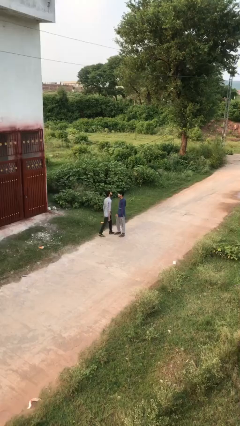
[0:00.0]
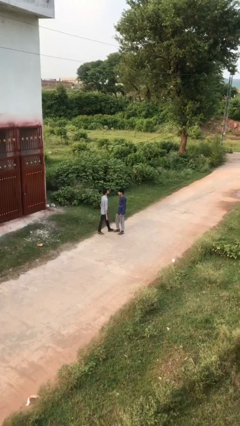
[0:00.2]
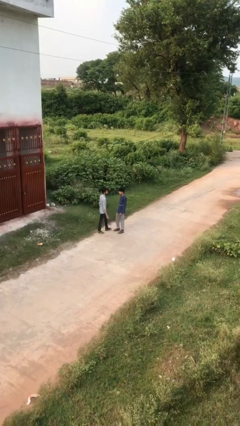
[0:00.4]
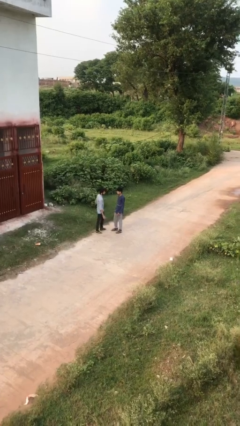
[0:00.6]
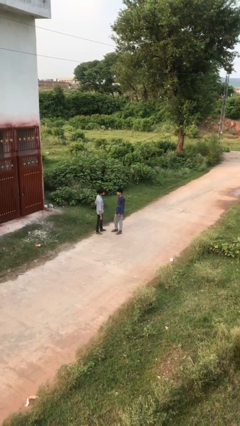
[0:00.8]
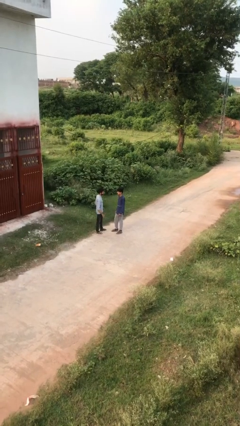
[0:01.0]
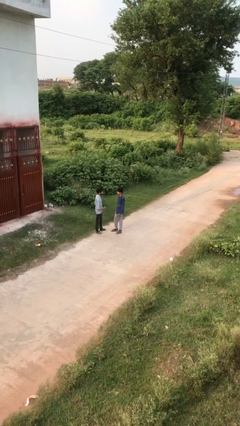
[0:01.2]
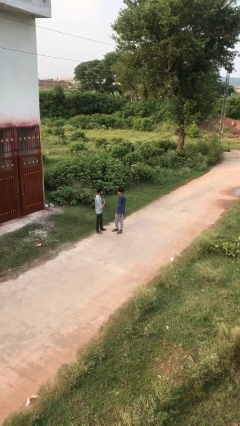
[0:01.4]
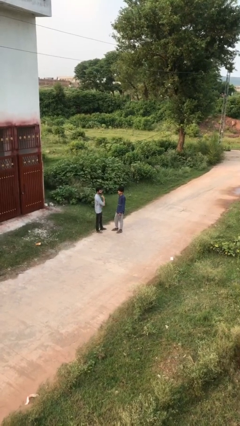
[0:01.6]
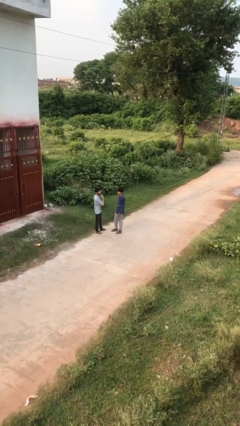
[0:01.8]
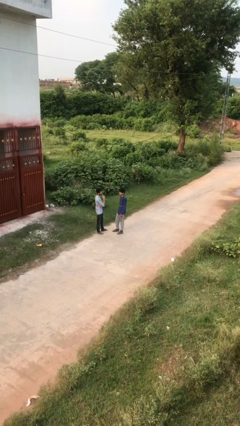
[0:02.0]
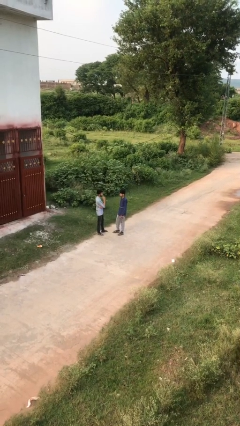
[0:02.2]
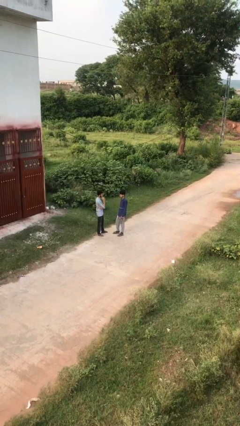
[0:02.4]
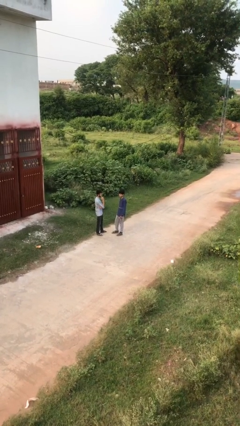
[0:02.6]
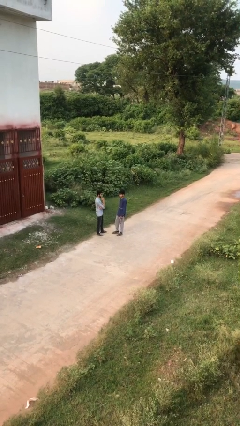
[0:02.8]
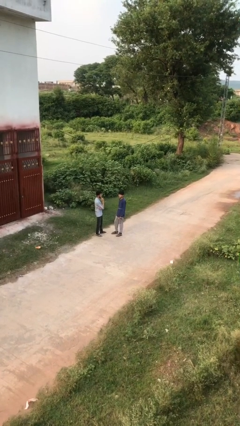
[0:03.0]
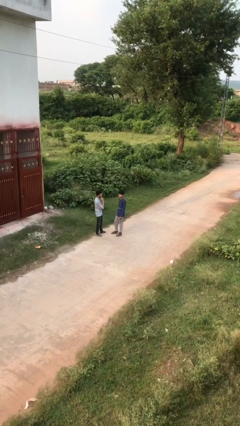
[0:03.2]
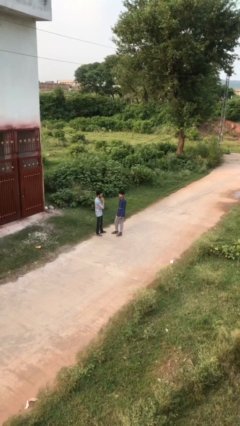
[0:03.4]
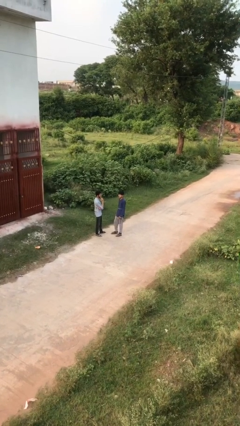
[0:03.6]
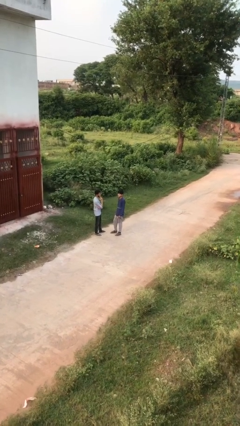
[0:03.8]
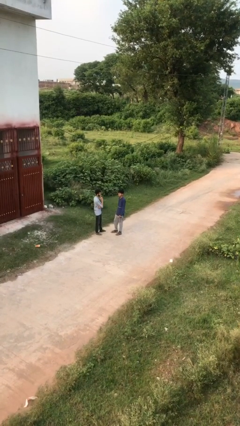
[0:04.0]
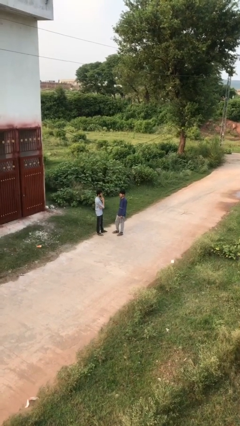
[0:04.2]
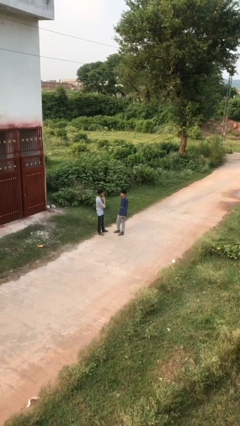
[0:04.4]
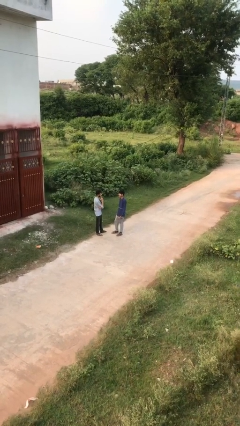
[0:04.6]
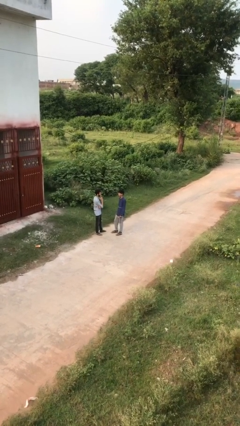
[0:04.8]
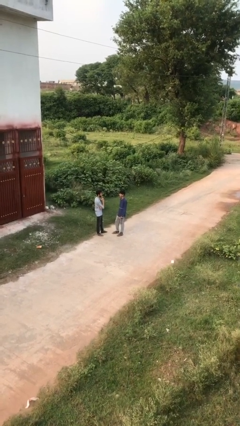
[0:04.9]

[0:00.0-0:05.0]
person talks to person

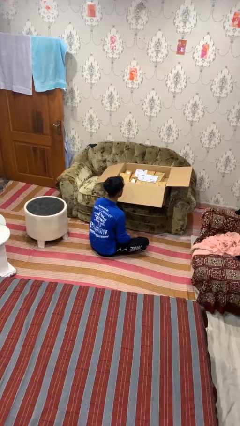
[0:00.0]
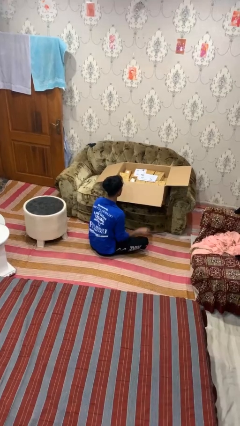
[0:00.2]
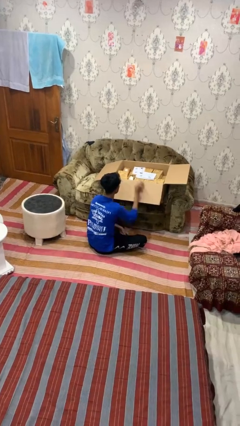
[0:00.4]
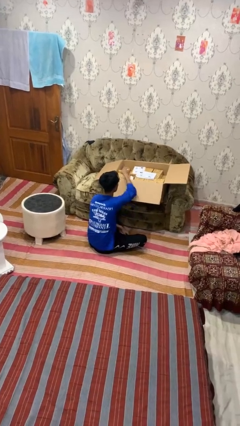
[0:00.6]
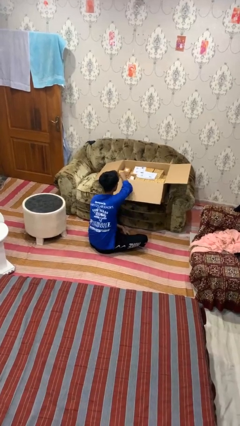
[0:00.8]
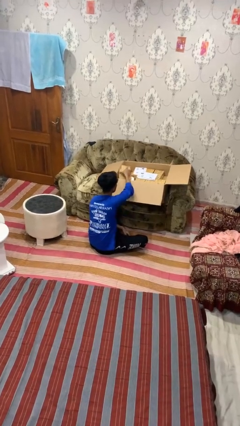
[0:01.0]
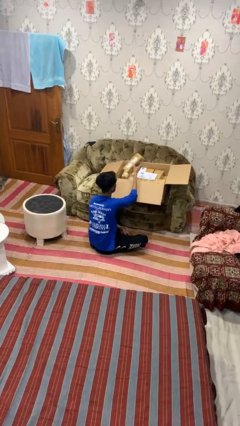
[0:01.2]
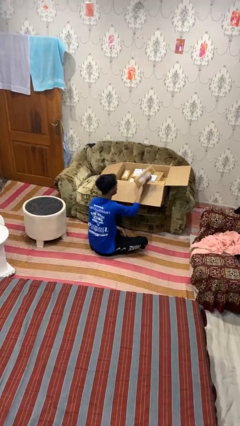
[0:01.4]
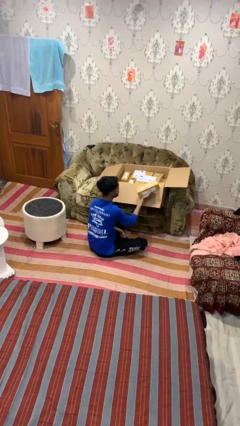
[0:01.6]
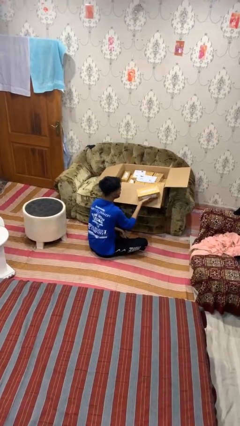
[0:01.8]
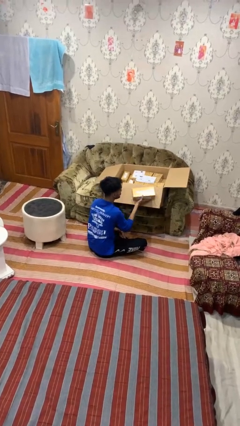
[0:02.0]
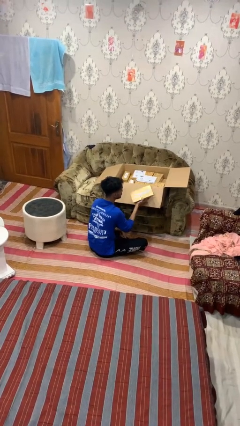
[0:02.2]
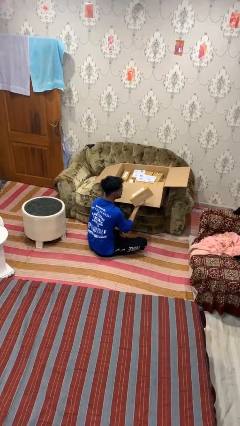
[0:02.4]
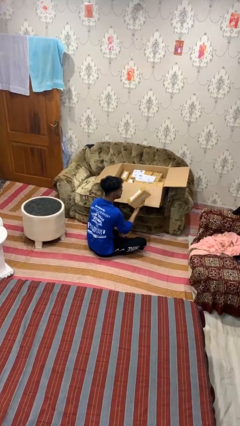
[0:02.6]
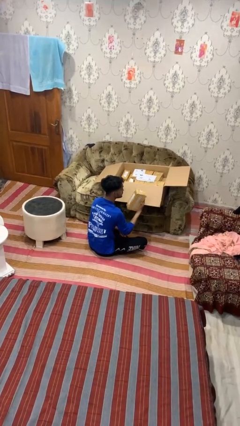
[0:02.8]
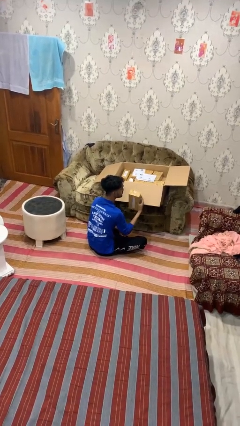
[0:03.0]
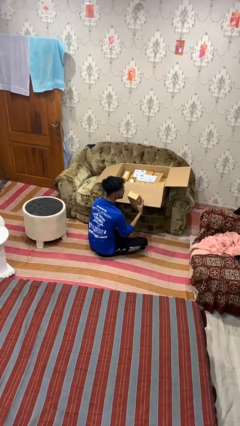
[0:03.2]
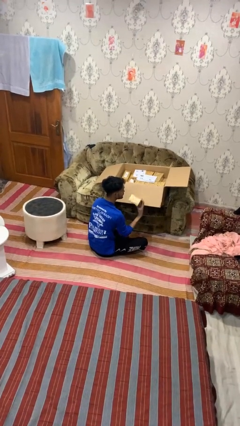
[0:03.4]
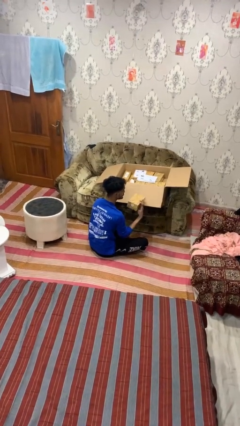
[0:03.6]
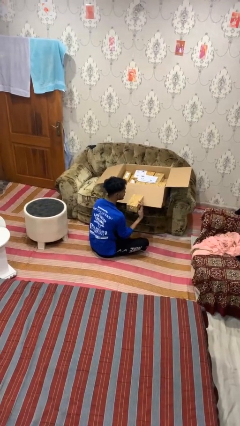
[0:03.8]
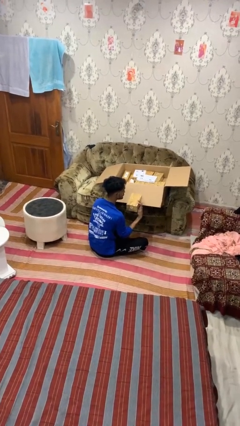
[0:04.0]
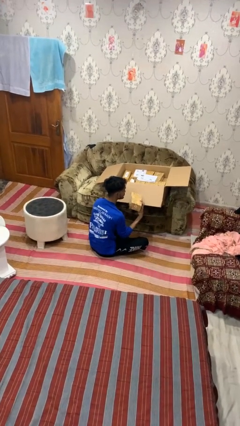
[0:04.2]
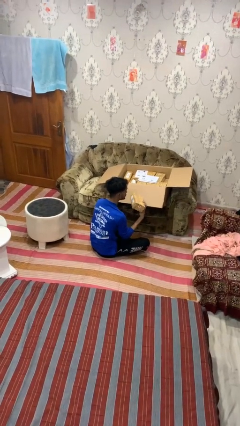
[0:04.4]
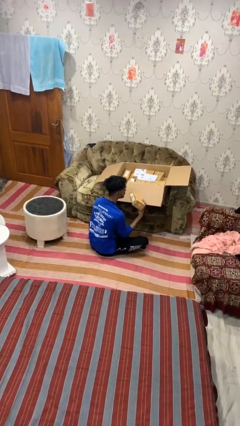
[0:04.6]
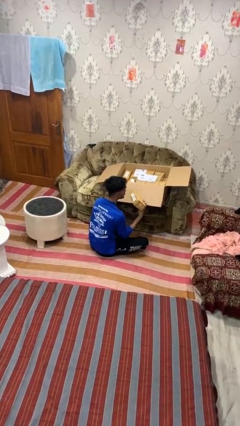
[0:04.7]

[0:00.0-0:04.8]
person takes object from box

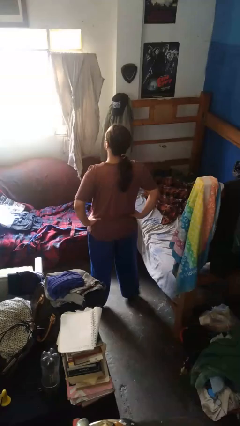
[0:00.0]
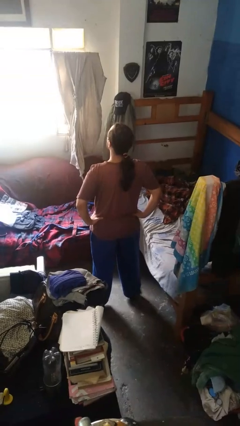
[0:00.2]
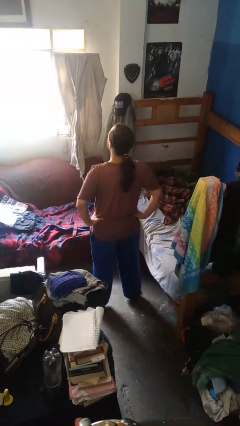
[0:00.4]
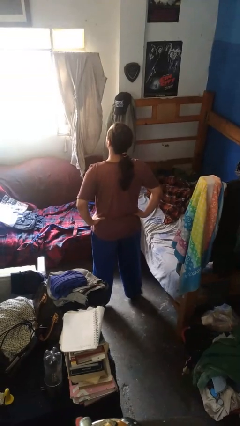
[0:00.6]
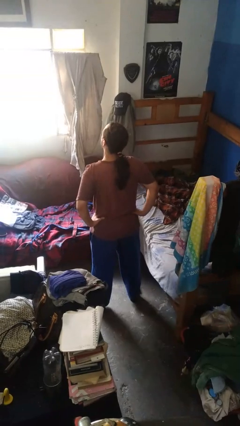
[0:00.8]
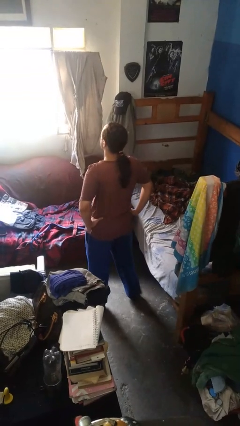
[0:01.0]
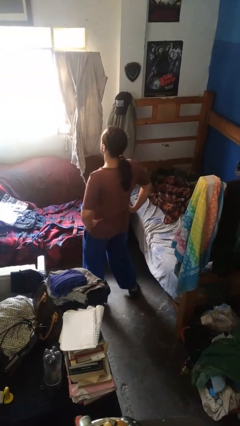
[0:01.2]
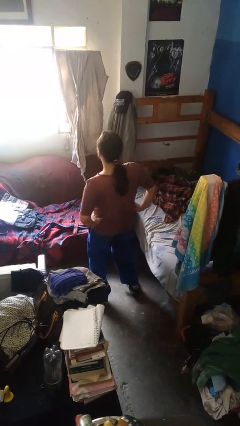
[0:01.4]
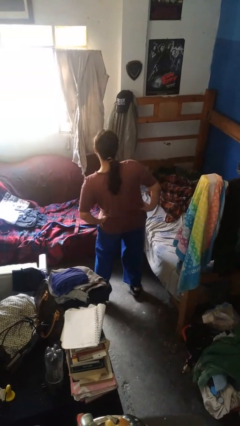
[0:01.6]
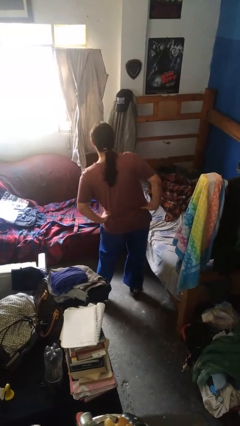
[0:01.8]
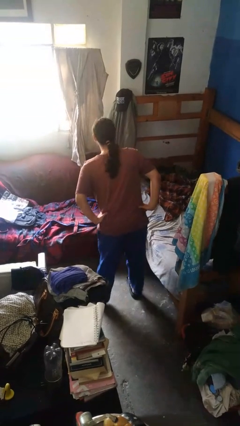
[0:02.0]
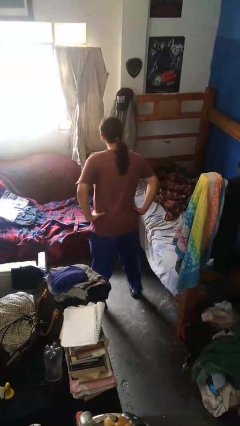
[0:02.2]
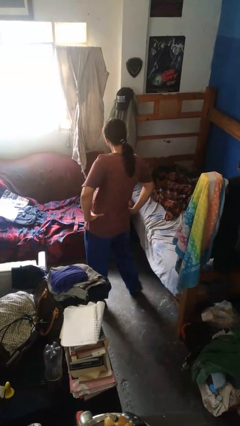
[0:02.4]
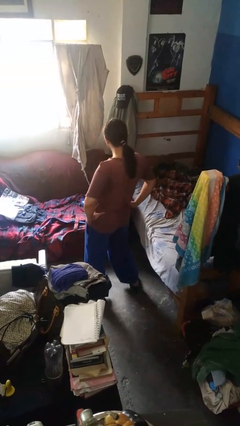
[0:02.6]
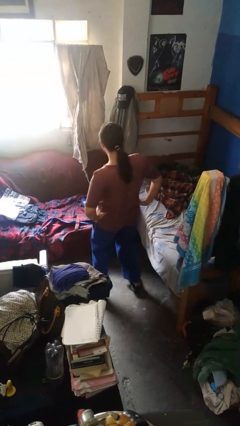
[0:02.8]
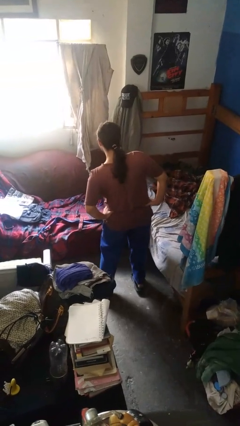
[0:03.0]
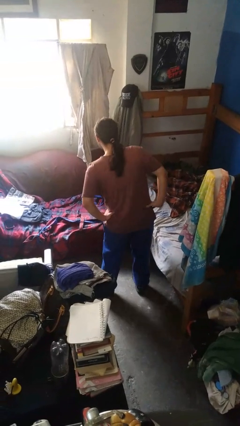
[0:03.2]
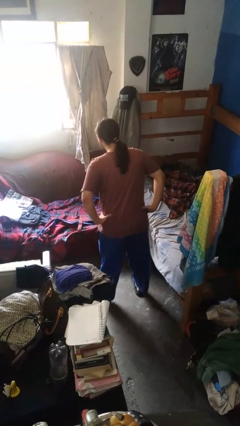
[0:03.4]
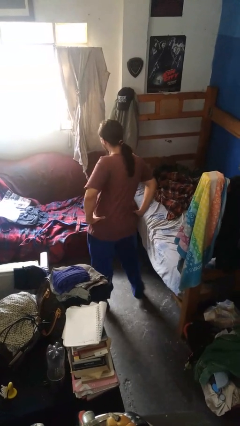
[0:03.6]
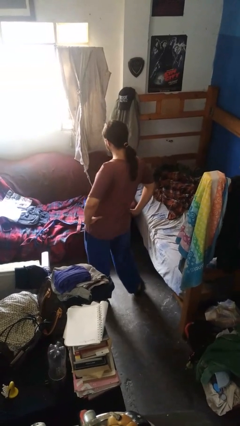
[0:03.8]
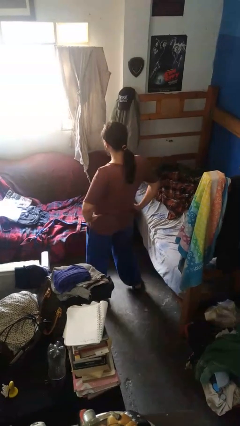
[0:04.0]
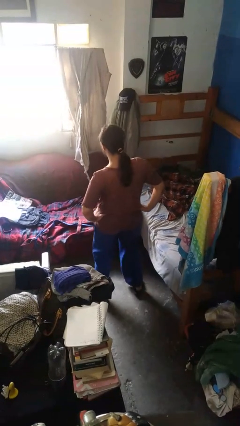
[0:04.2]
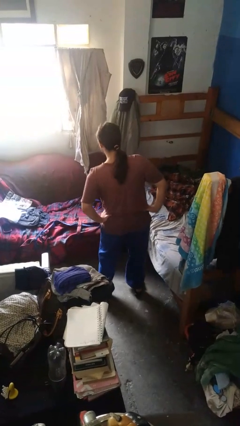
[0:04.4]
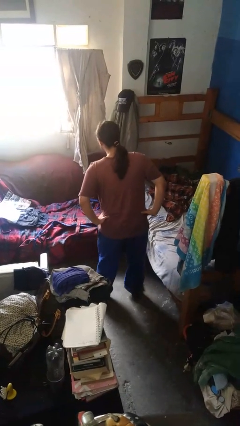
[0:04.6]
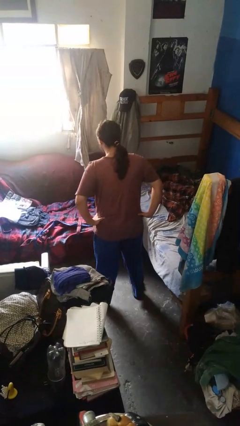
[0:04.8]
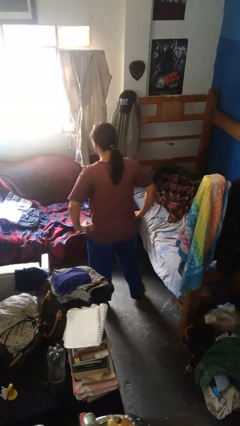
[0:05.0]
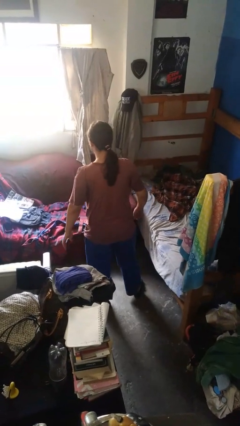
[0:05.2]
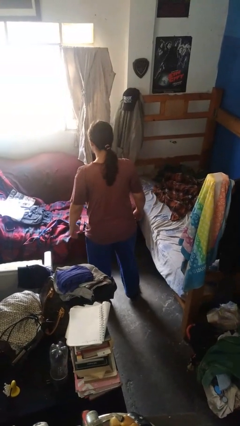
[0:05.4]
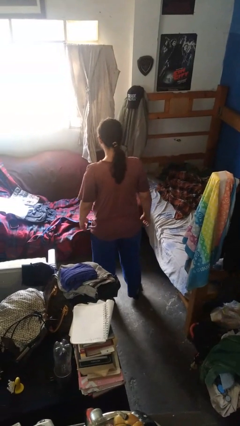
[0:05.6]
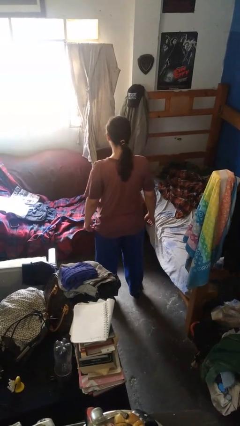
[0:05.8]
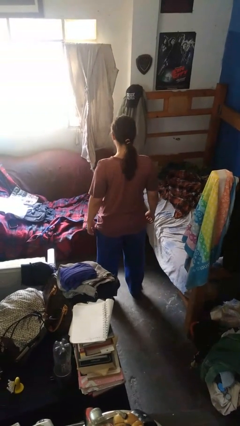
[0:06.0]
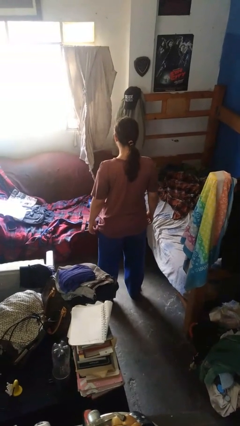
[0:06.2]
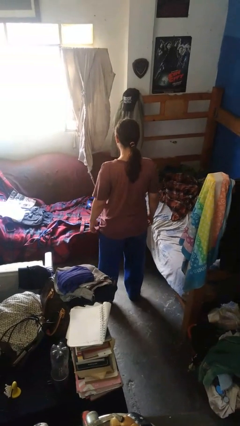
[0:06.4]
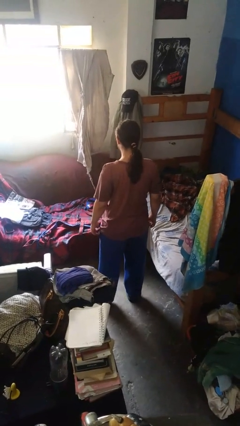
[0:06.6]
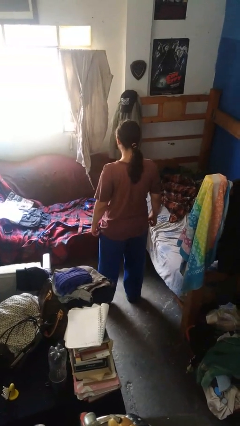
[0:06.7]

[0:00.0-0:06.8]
person wiggles hips

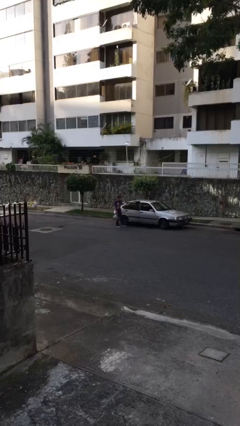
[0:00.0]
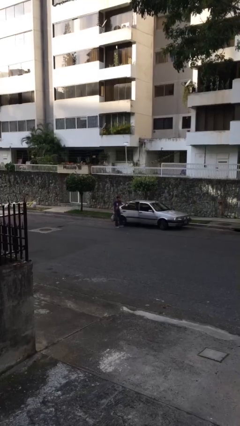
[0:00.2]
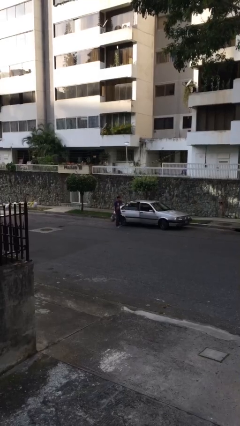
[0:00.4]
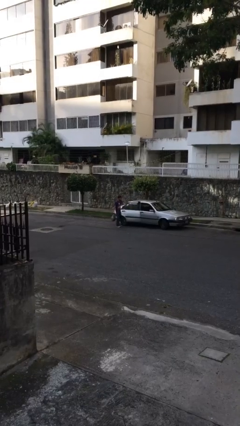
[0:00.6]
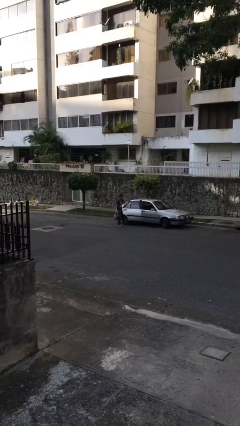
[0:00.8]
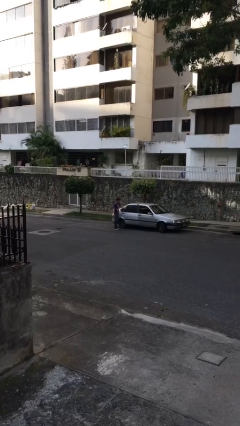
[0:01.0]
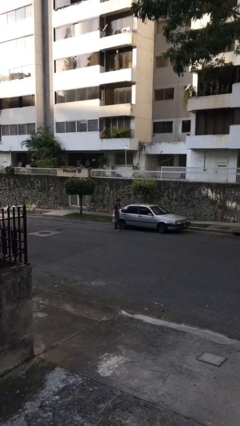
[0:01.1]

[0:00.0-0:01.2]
person closes car door
